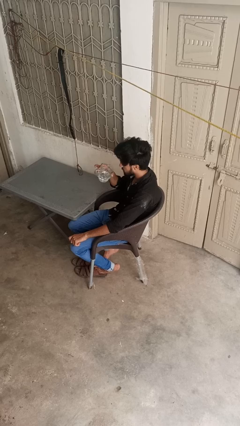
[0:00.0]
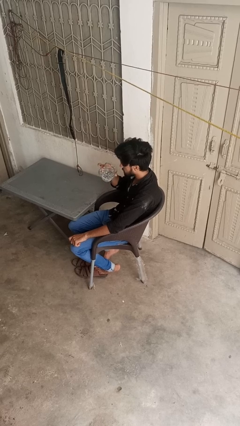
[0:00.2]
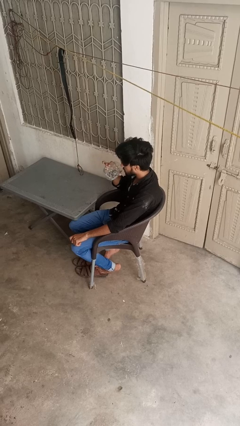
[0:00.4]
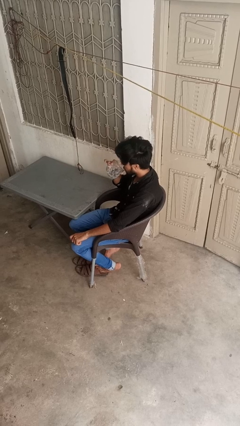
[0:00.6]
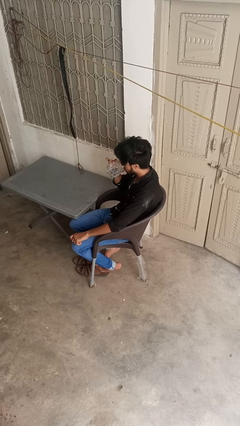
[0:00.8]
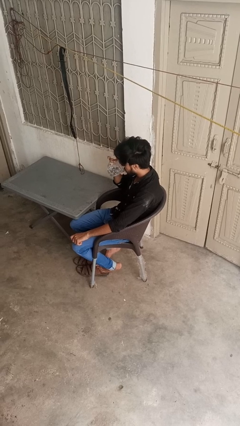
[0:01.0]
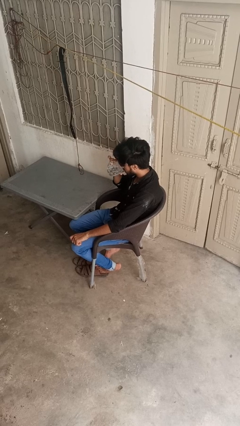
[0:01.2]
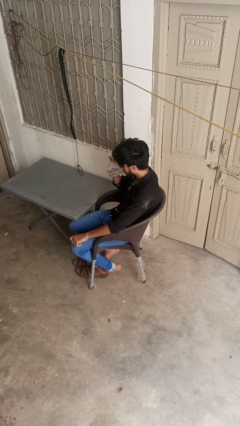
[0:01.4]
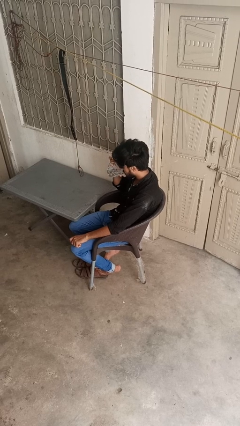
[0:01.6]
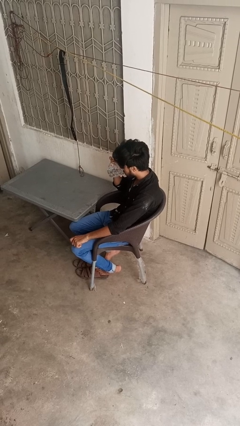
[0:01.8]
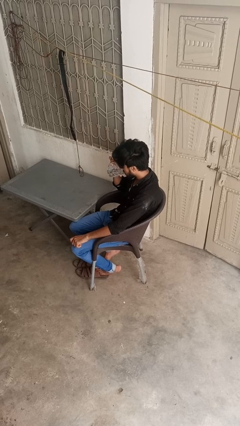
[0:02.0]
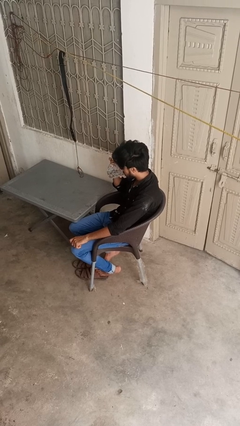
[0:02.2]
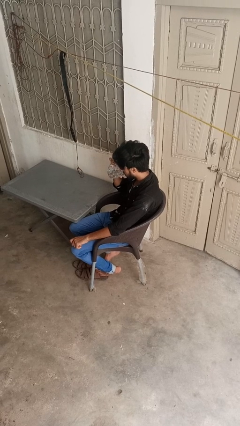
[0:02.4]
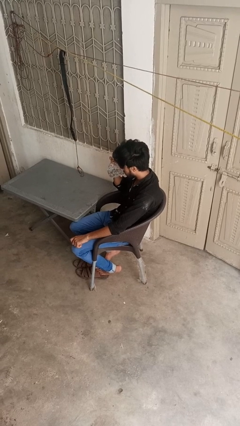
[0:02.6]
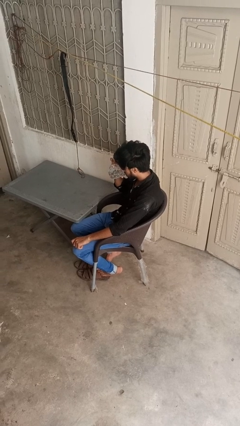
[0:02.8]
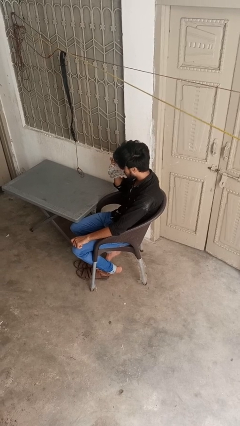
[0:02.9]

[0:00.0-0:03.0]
person drinks from mug

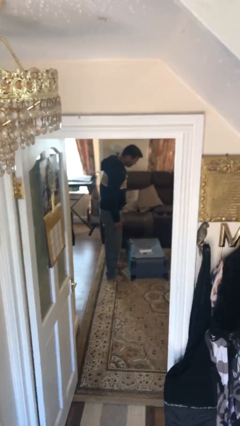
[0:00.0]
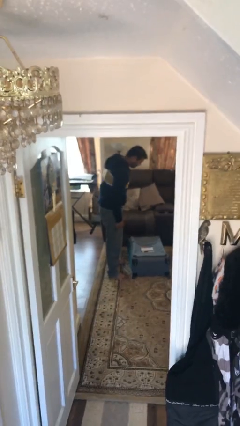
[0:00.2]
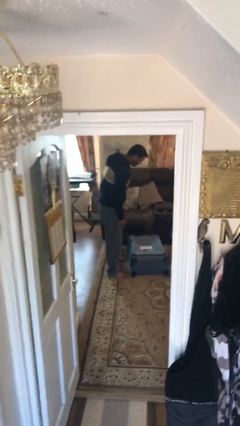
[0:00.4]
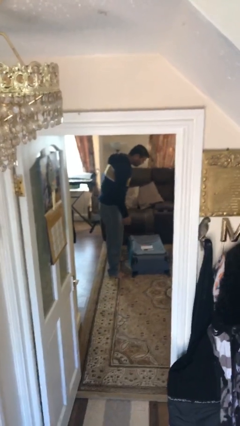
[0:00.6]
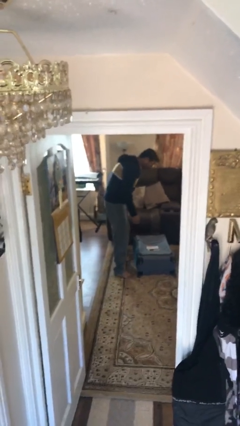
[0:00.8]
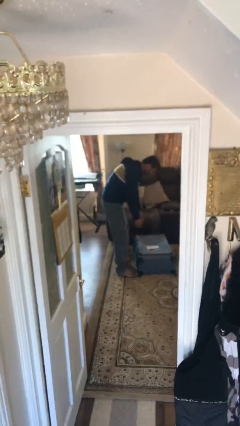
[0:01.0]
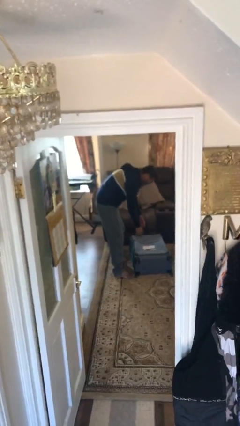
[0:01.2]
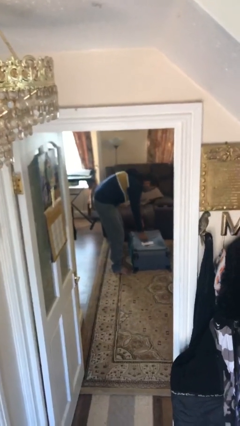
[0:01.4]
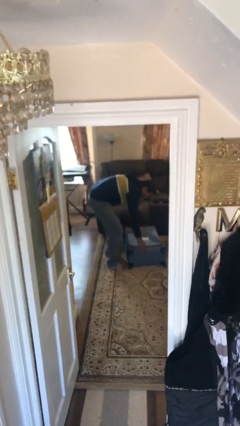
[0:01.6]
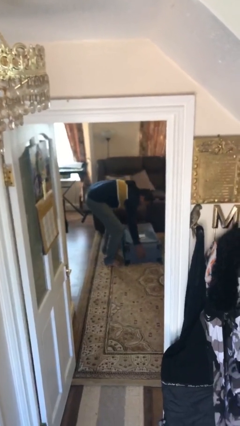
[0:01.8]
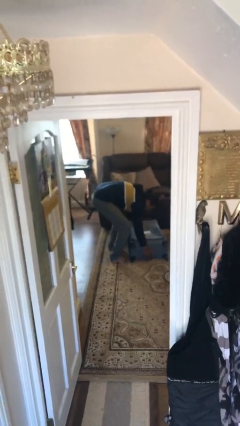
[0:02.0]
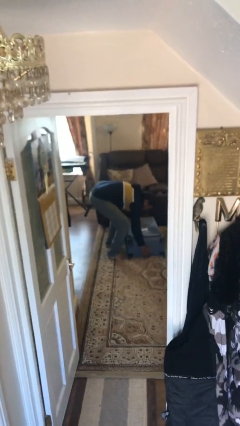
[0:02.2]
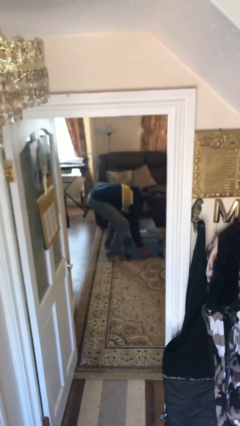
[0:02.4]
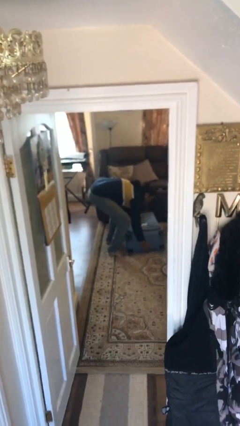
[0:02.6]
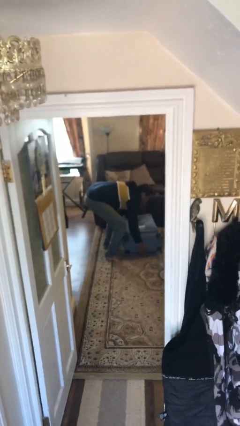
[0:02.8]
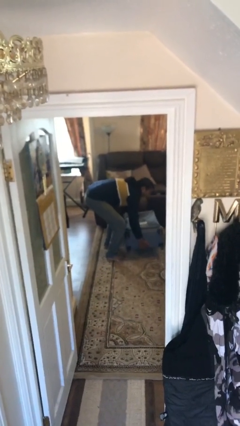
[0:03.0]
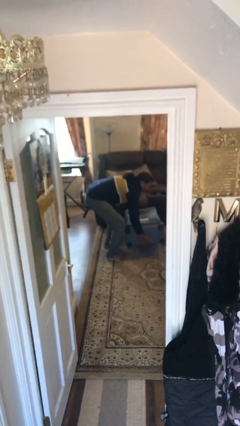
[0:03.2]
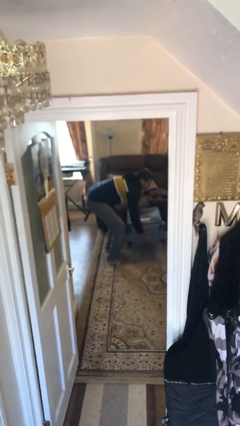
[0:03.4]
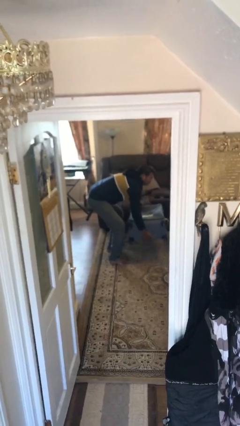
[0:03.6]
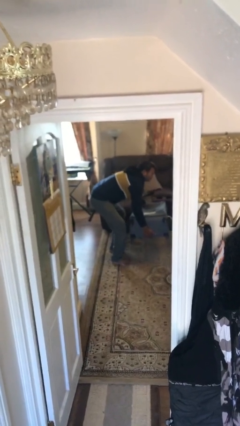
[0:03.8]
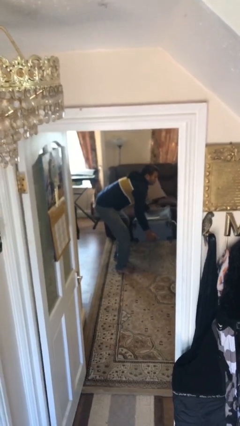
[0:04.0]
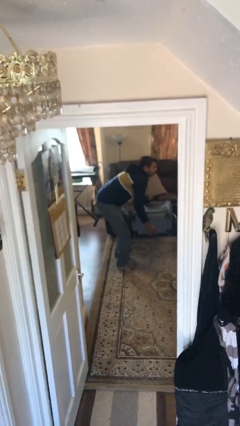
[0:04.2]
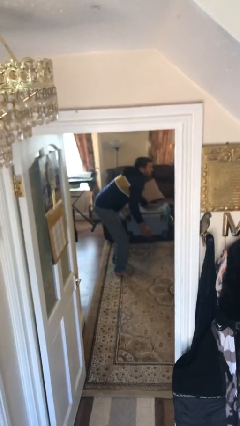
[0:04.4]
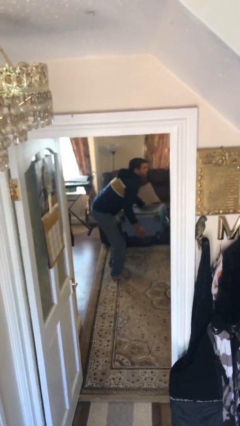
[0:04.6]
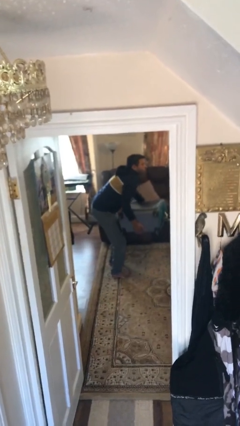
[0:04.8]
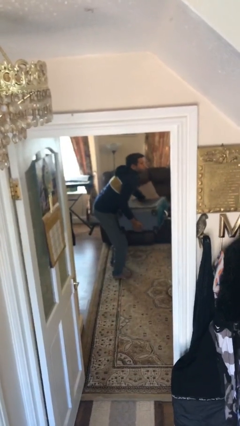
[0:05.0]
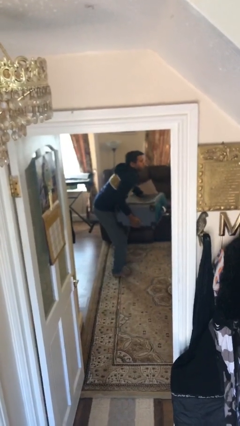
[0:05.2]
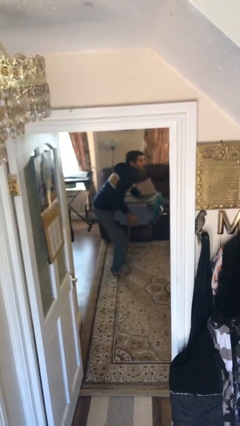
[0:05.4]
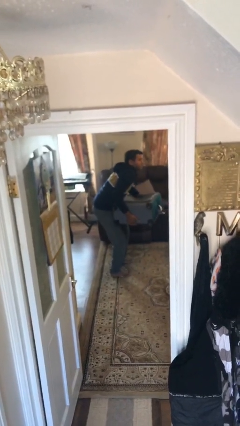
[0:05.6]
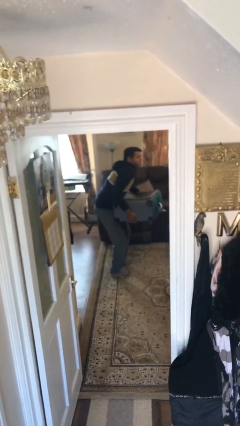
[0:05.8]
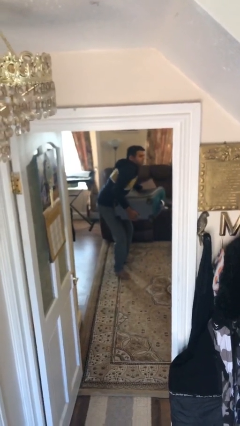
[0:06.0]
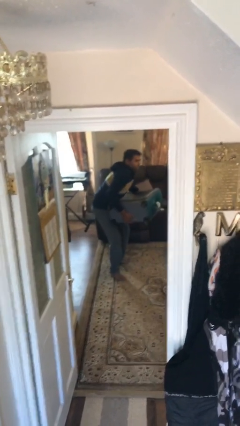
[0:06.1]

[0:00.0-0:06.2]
person picks up object from floor

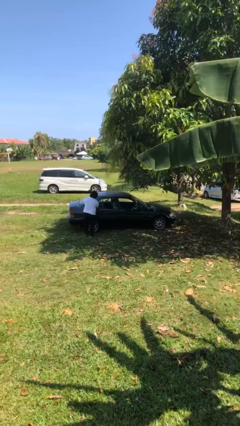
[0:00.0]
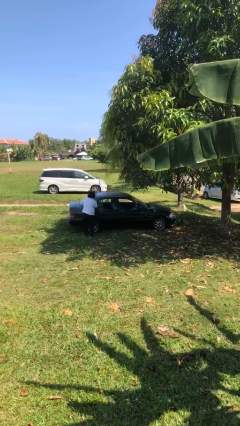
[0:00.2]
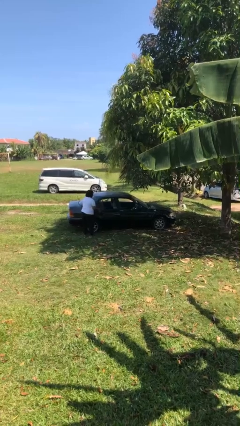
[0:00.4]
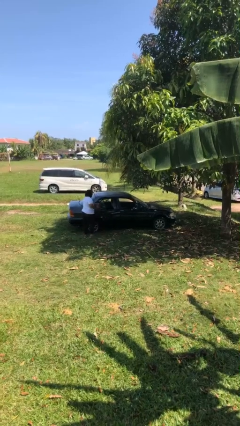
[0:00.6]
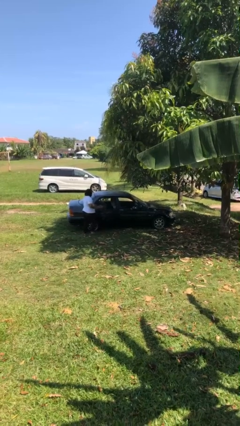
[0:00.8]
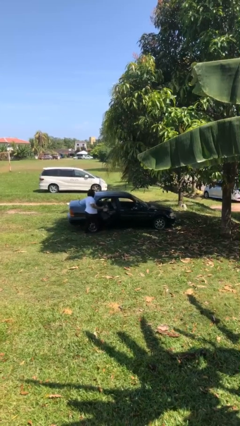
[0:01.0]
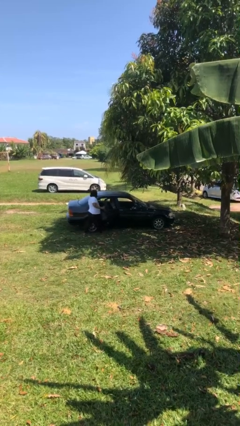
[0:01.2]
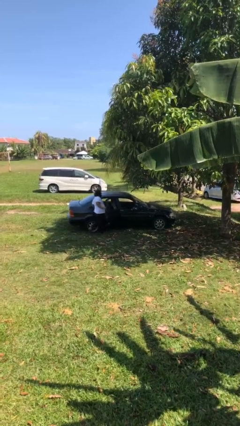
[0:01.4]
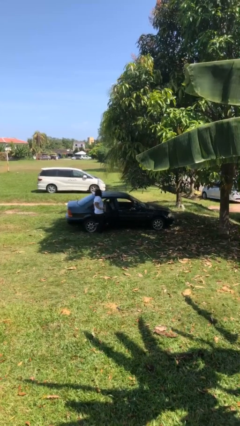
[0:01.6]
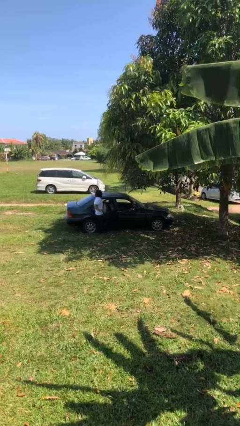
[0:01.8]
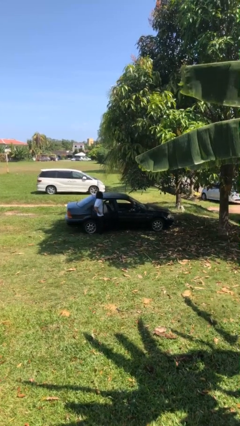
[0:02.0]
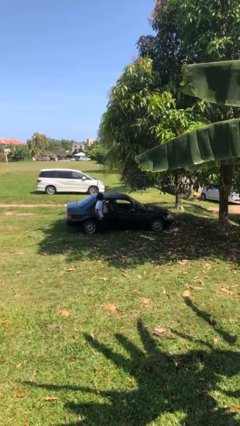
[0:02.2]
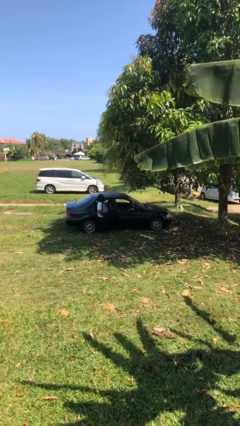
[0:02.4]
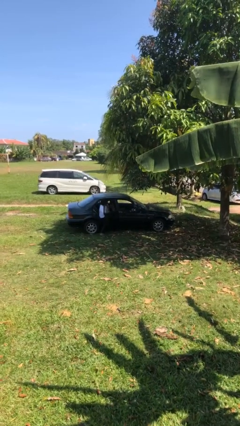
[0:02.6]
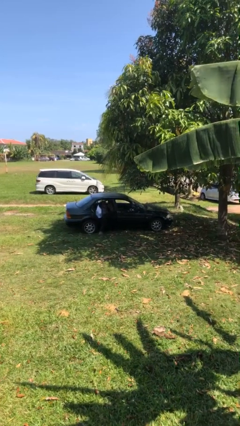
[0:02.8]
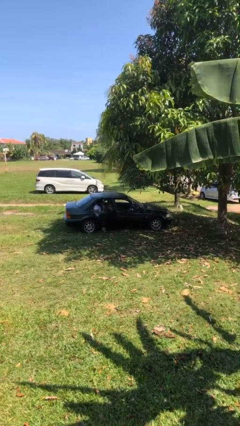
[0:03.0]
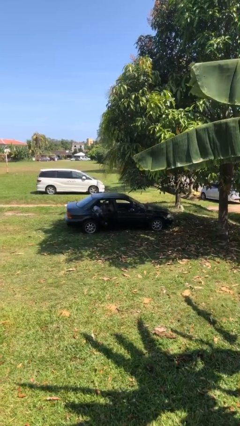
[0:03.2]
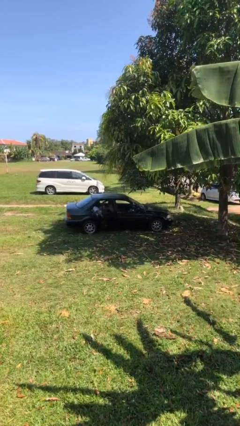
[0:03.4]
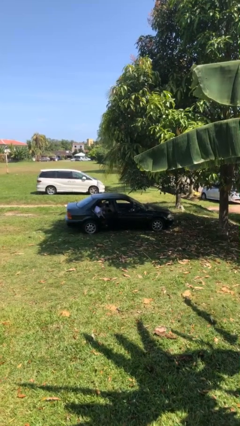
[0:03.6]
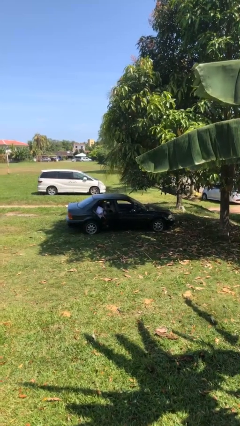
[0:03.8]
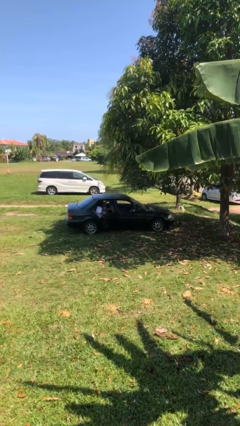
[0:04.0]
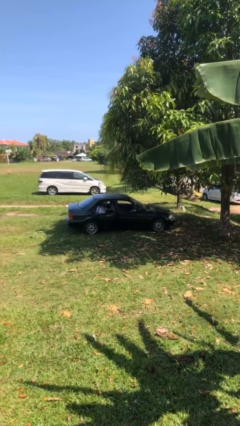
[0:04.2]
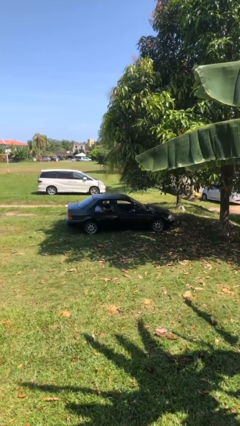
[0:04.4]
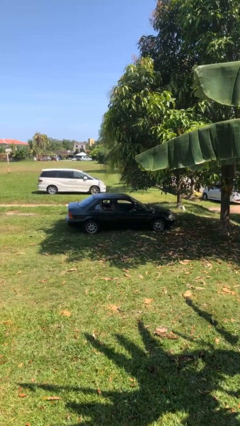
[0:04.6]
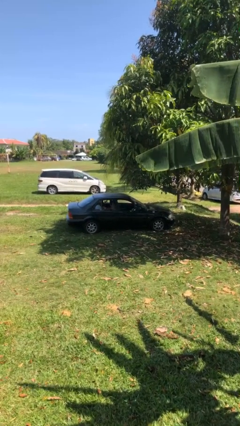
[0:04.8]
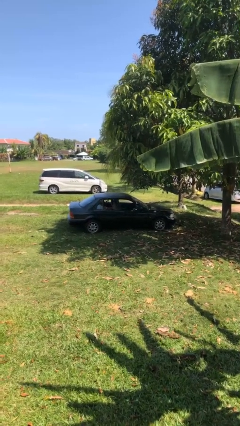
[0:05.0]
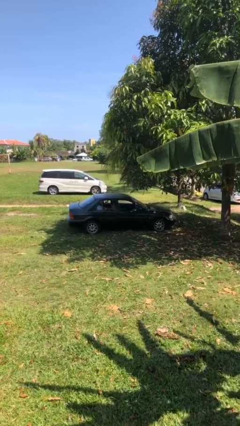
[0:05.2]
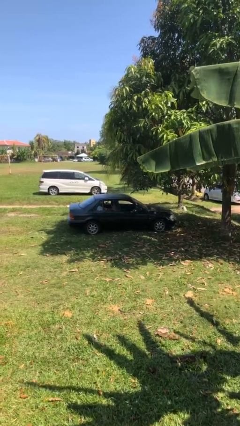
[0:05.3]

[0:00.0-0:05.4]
car picks up person

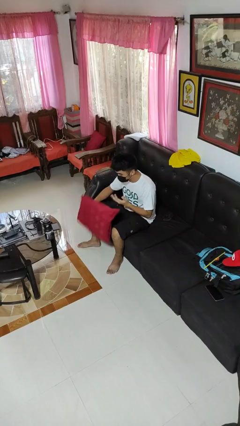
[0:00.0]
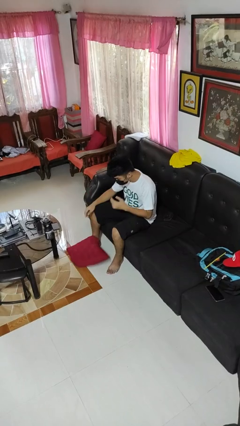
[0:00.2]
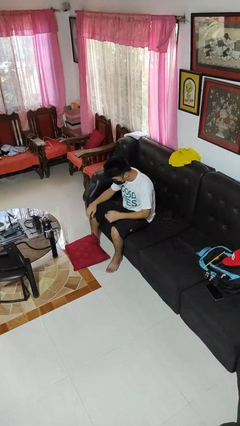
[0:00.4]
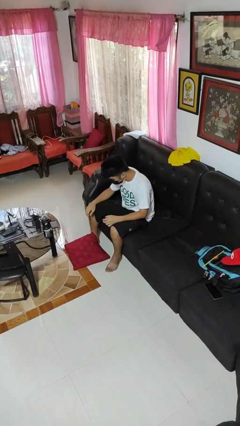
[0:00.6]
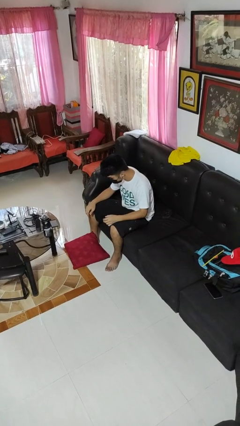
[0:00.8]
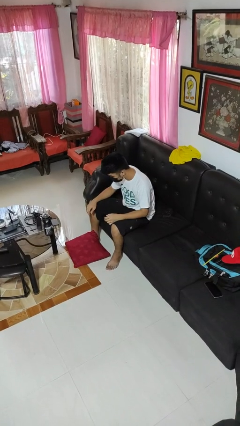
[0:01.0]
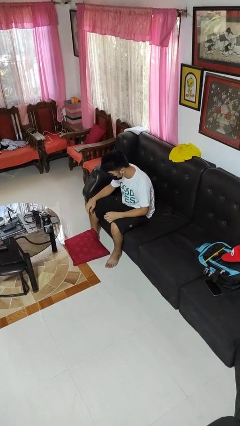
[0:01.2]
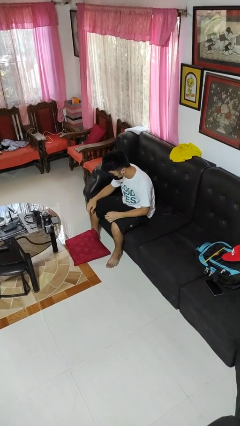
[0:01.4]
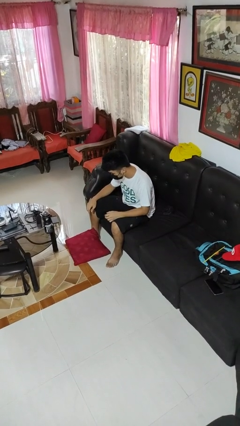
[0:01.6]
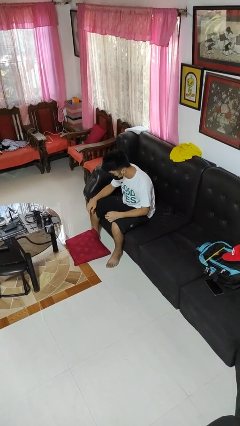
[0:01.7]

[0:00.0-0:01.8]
person drops object

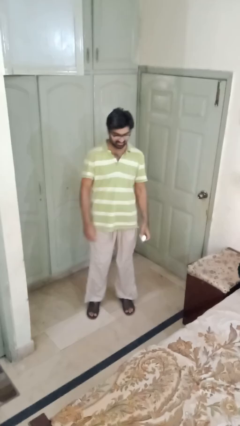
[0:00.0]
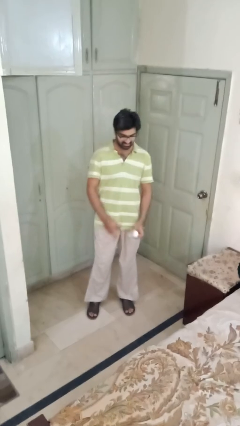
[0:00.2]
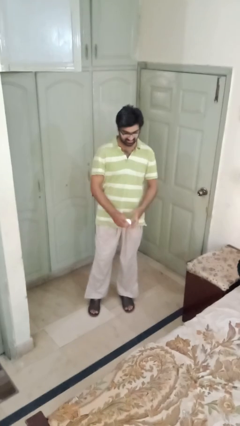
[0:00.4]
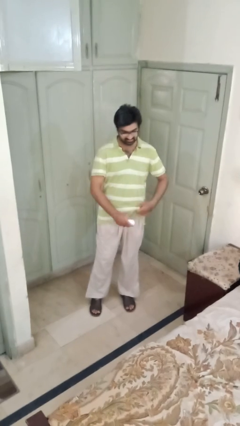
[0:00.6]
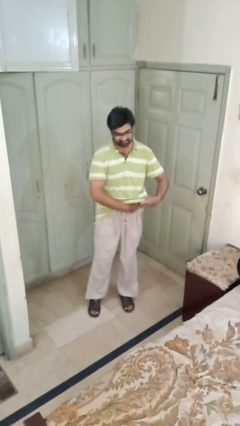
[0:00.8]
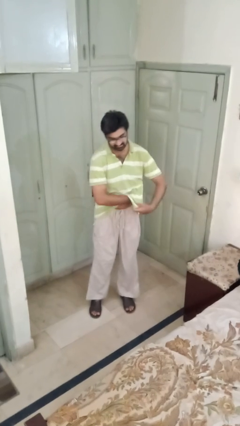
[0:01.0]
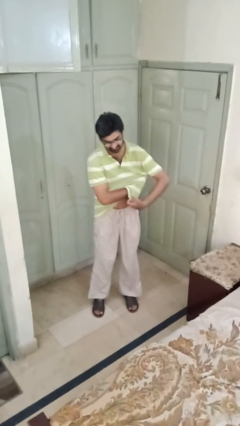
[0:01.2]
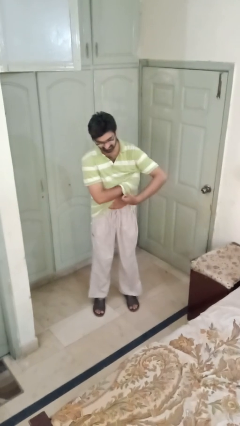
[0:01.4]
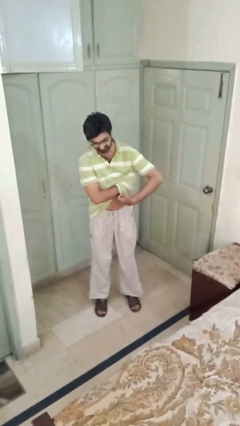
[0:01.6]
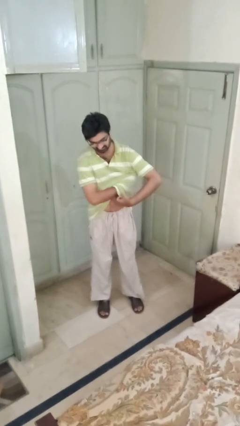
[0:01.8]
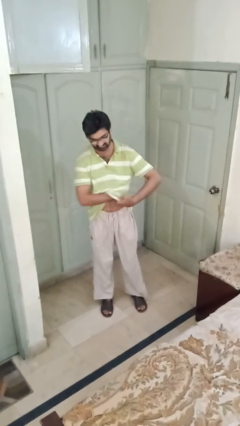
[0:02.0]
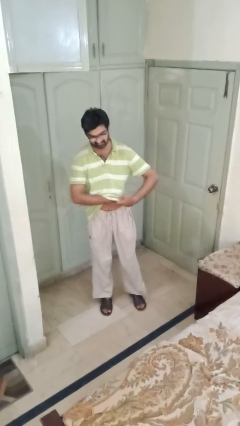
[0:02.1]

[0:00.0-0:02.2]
person applies deodorant
